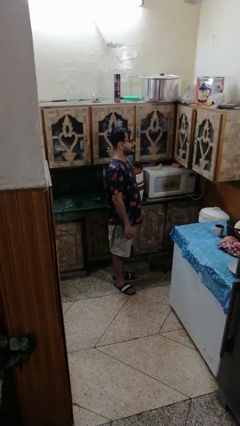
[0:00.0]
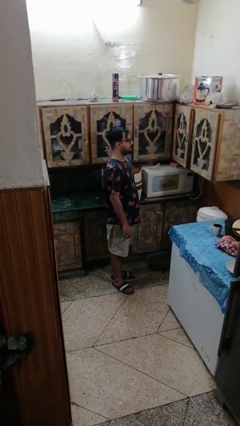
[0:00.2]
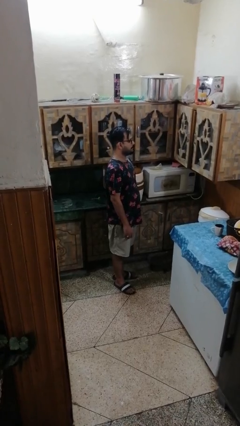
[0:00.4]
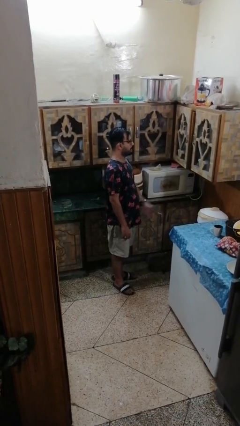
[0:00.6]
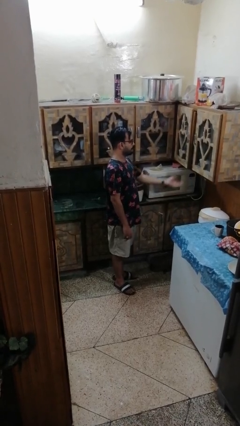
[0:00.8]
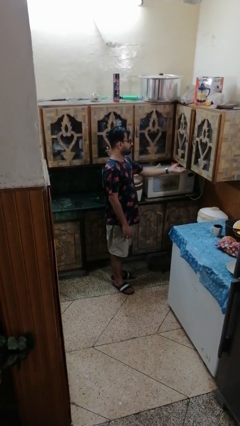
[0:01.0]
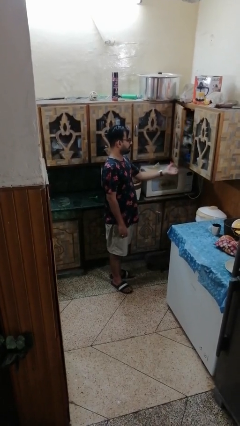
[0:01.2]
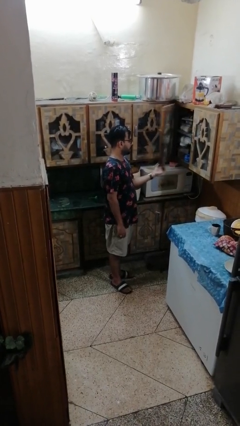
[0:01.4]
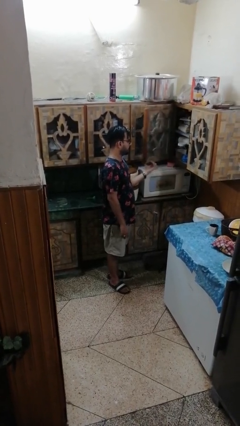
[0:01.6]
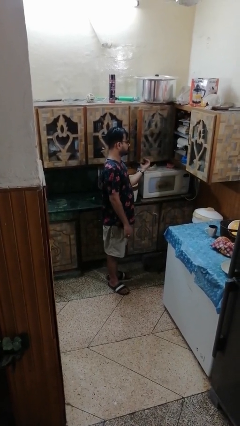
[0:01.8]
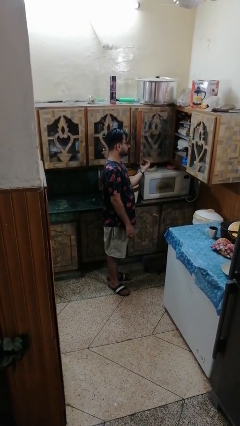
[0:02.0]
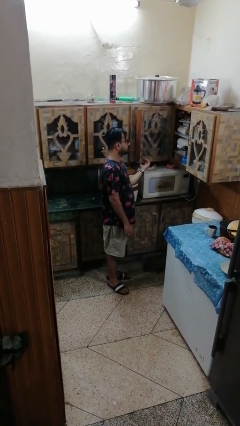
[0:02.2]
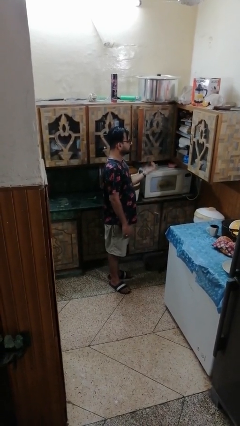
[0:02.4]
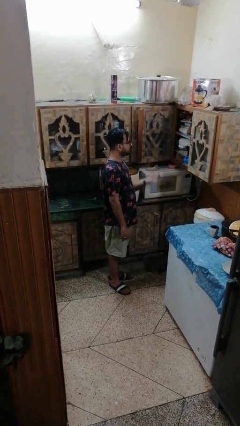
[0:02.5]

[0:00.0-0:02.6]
person opens cabinet

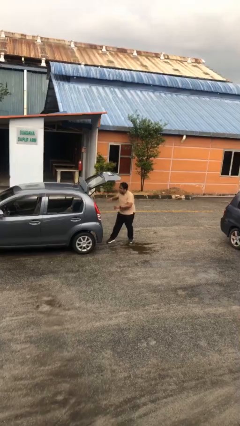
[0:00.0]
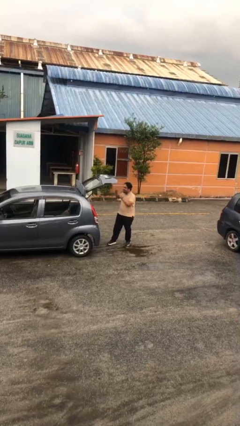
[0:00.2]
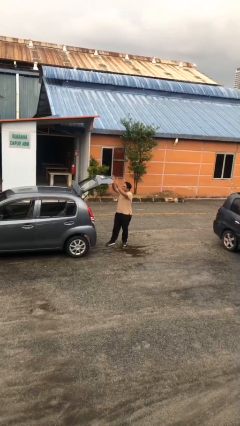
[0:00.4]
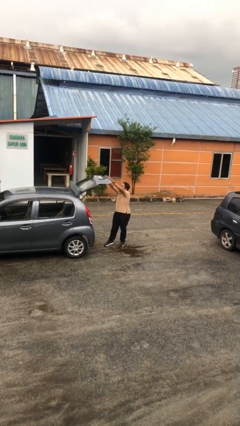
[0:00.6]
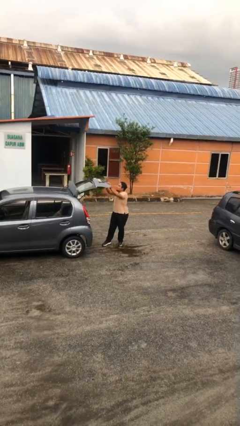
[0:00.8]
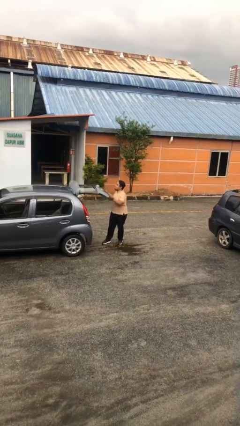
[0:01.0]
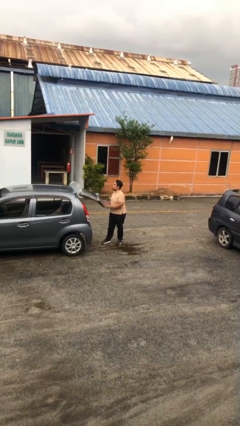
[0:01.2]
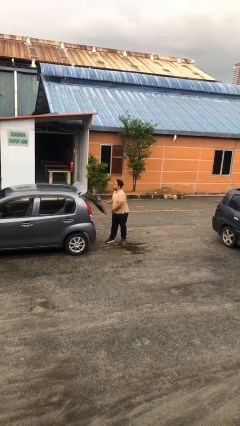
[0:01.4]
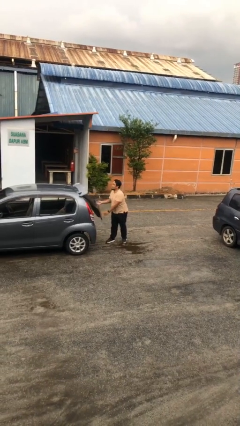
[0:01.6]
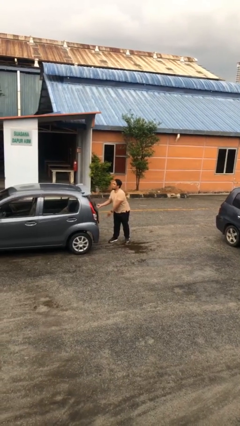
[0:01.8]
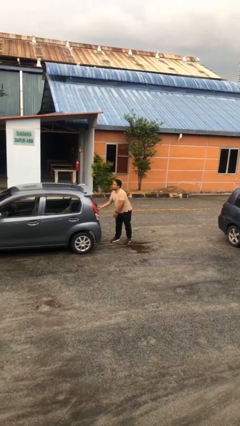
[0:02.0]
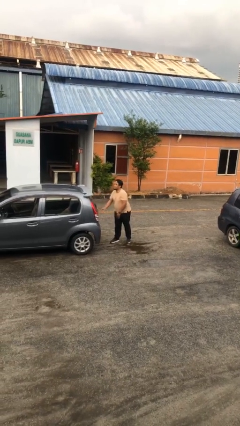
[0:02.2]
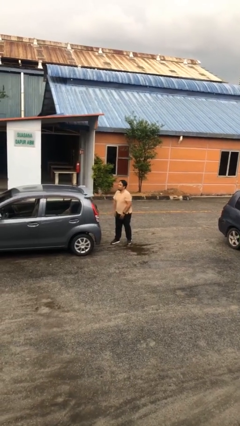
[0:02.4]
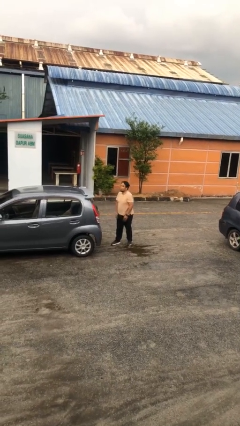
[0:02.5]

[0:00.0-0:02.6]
person closes car trunk

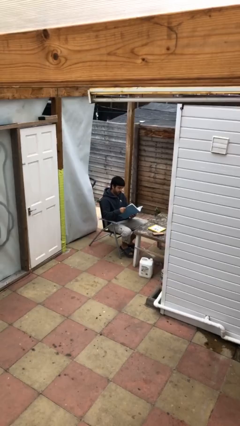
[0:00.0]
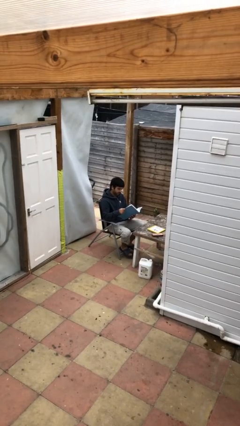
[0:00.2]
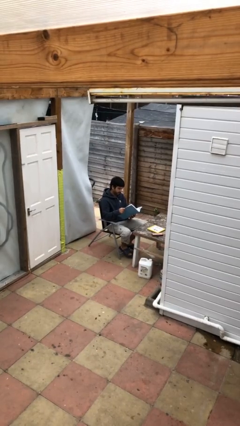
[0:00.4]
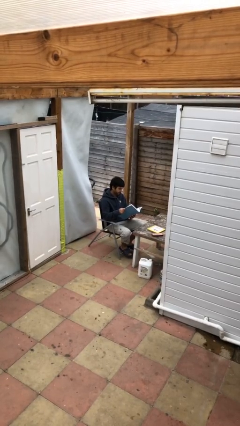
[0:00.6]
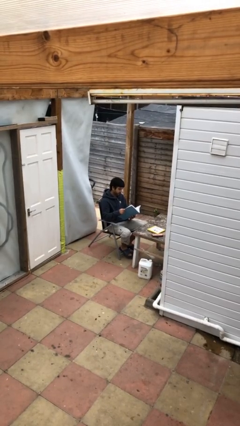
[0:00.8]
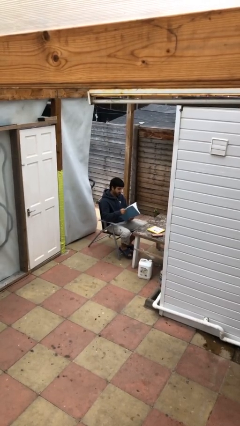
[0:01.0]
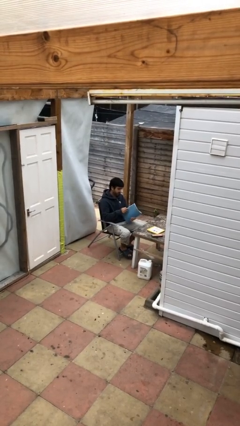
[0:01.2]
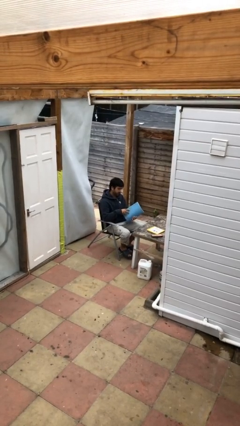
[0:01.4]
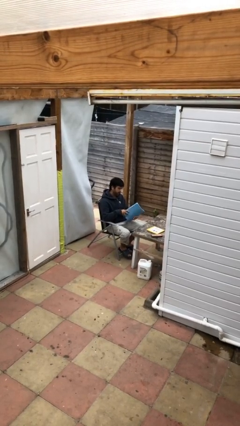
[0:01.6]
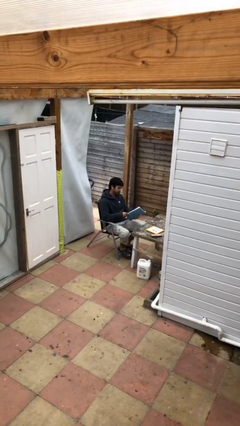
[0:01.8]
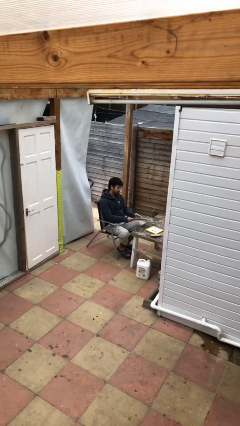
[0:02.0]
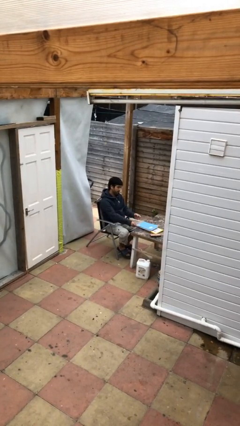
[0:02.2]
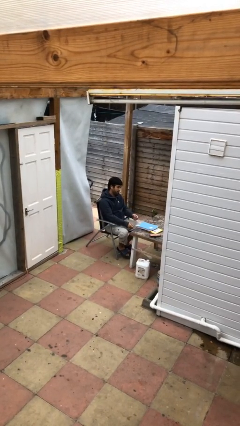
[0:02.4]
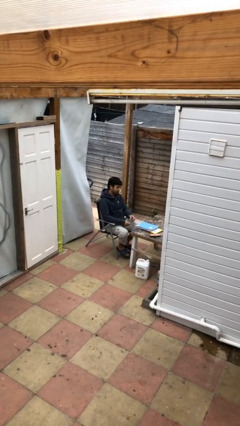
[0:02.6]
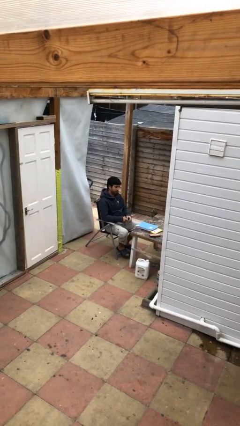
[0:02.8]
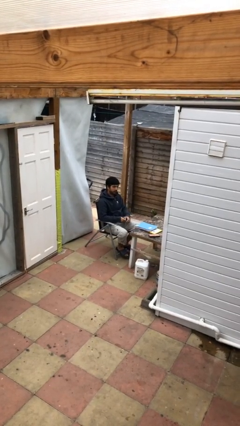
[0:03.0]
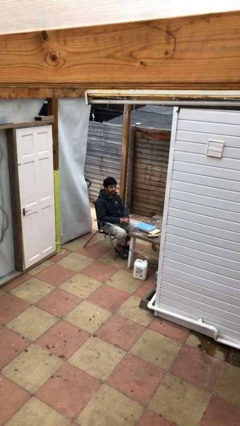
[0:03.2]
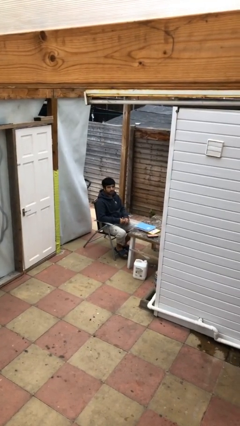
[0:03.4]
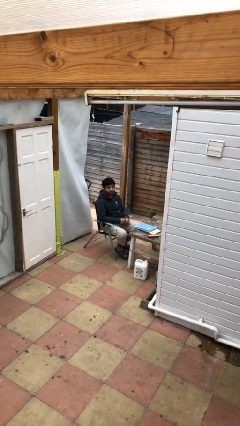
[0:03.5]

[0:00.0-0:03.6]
person puts down object on table

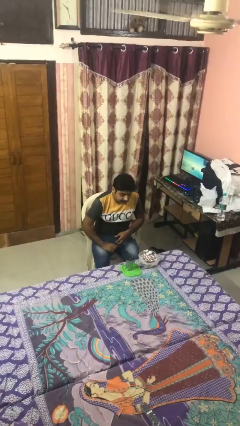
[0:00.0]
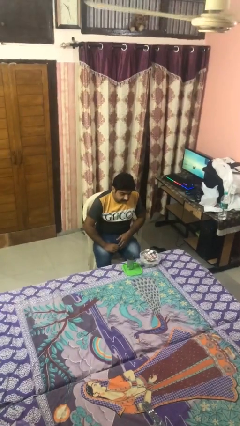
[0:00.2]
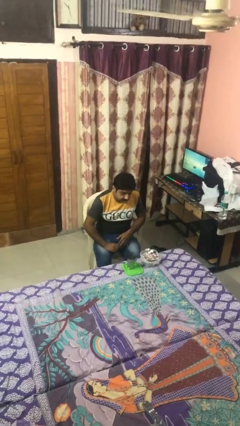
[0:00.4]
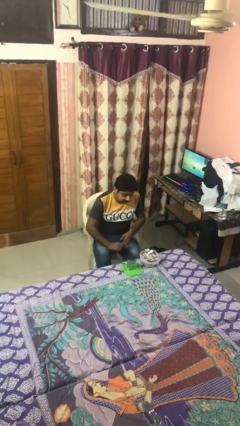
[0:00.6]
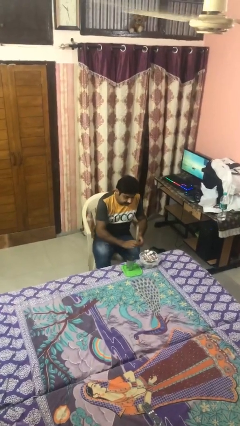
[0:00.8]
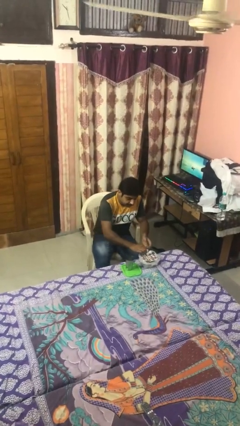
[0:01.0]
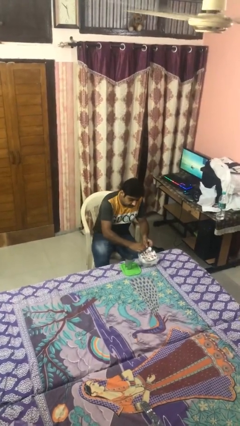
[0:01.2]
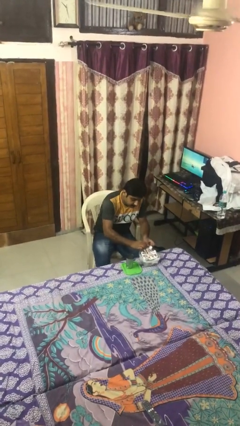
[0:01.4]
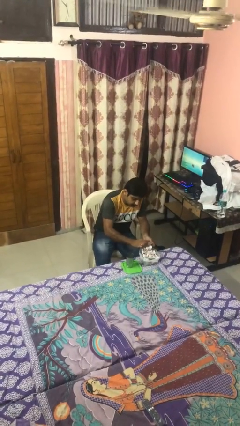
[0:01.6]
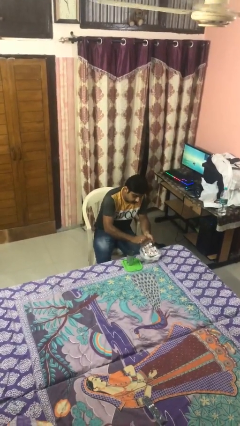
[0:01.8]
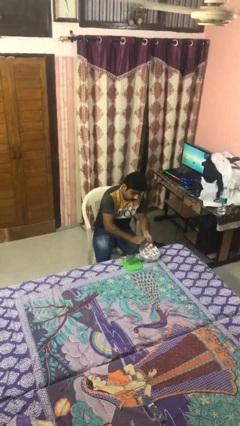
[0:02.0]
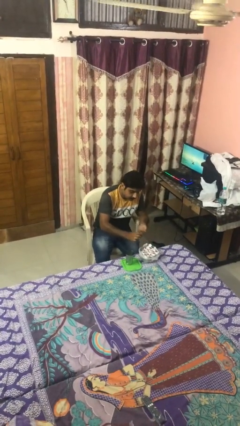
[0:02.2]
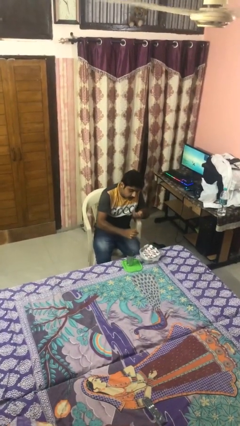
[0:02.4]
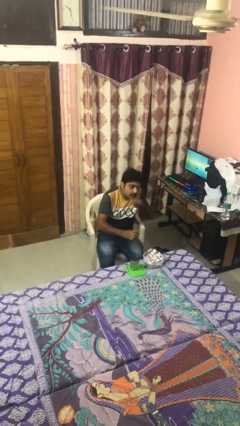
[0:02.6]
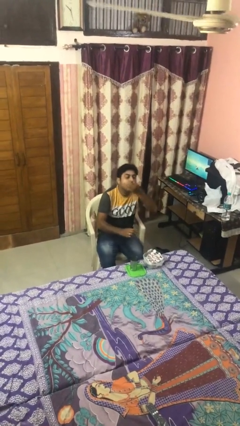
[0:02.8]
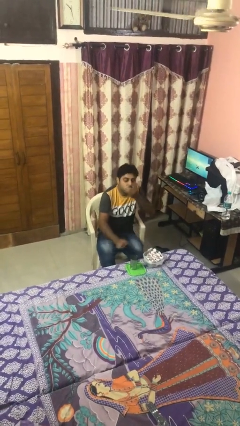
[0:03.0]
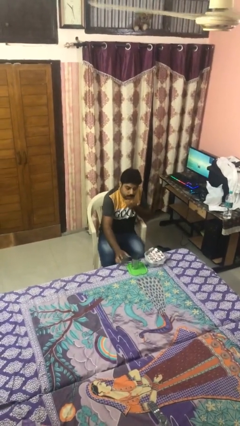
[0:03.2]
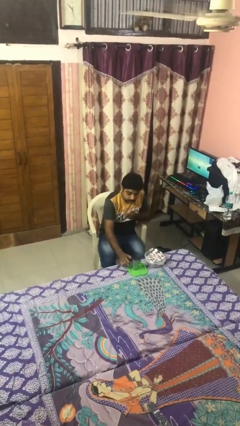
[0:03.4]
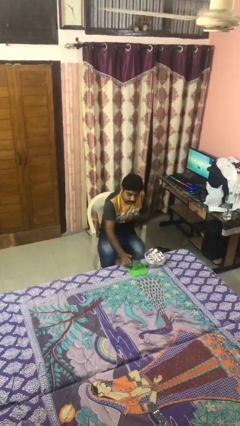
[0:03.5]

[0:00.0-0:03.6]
person takes medicine pills

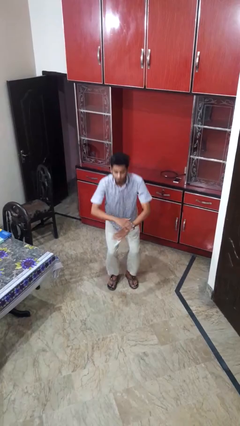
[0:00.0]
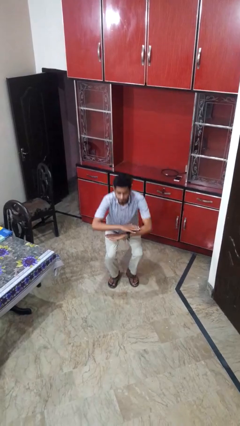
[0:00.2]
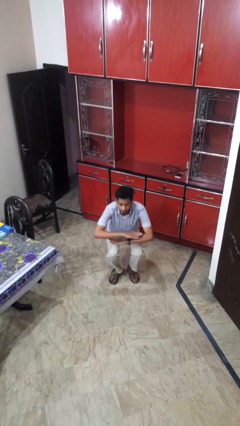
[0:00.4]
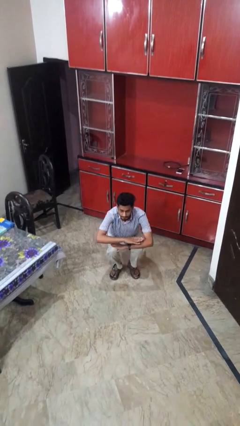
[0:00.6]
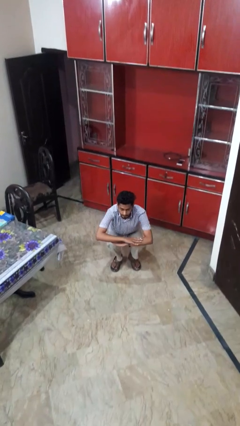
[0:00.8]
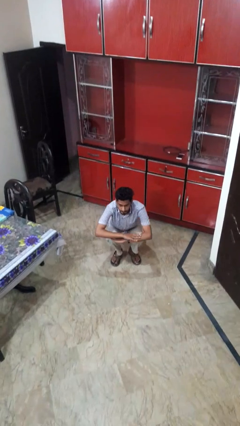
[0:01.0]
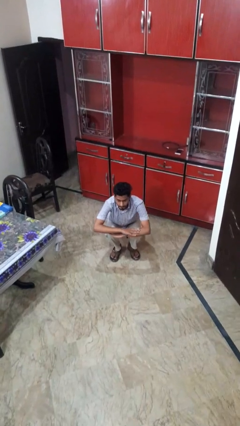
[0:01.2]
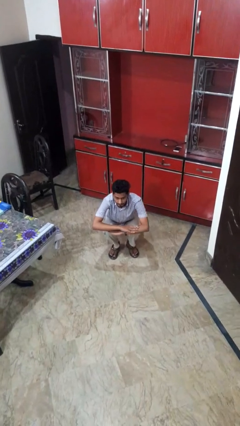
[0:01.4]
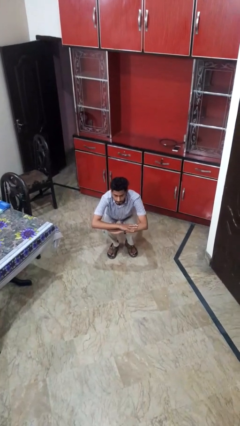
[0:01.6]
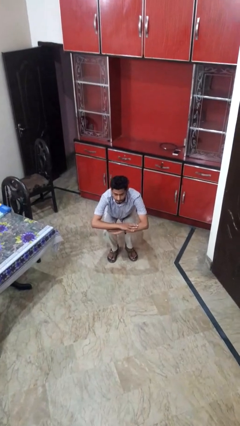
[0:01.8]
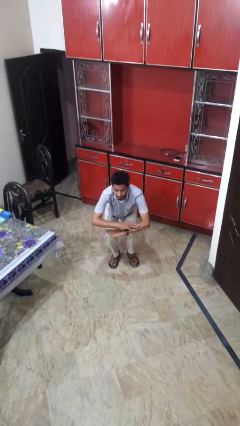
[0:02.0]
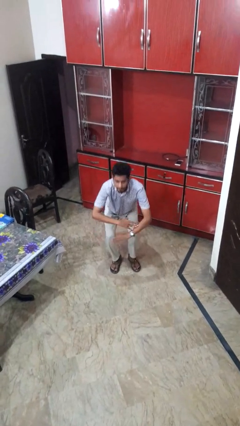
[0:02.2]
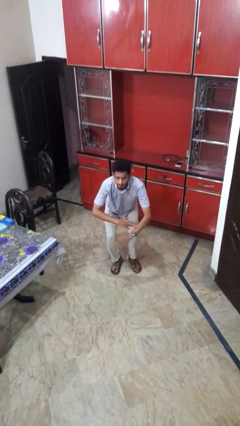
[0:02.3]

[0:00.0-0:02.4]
person squats

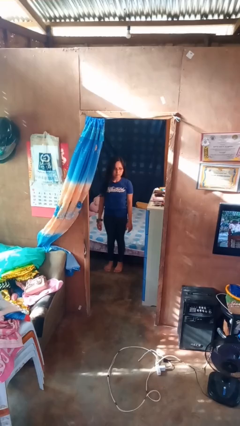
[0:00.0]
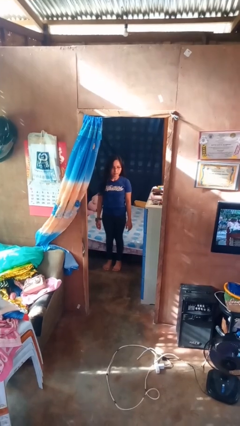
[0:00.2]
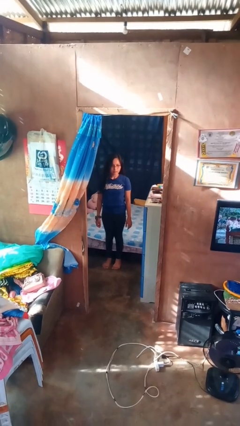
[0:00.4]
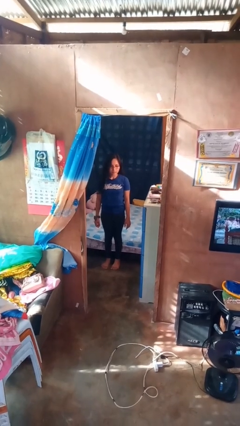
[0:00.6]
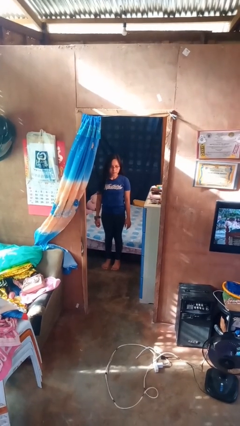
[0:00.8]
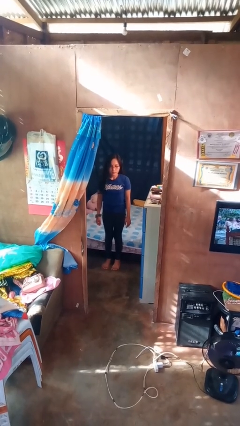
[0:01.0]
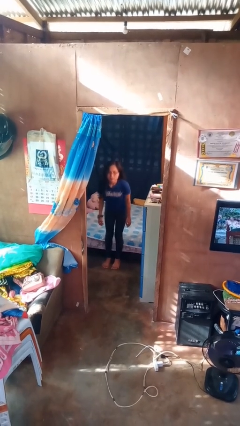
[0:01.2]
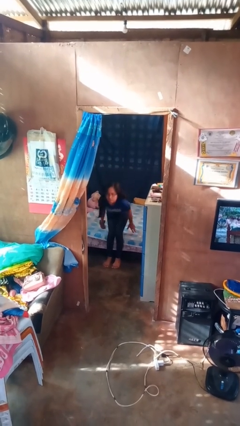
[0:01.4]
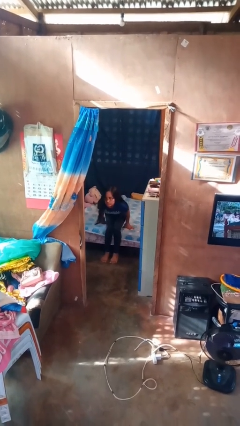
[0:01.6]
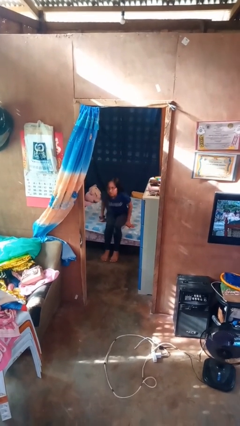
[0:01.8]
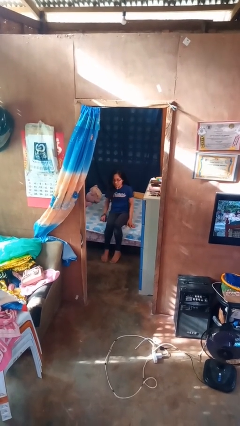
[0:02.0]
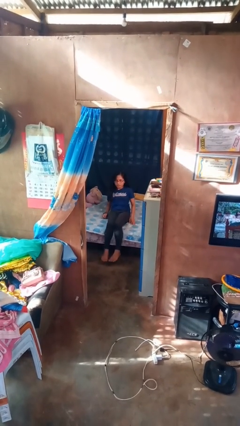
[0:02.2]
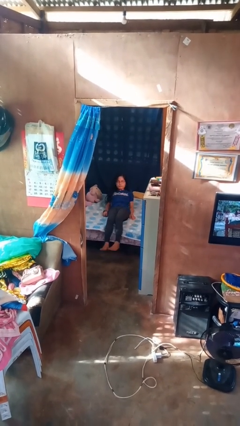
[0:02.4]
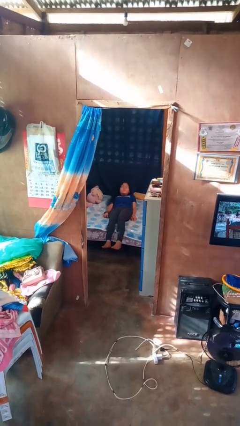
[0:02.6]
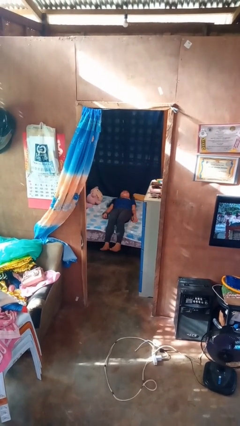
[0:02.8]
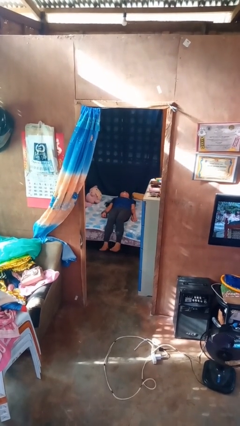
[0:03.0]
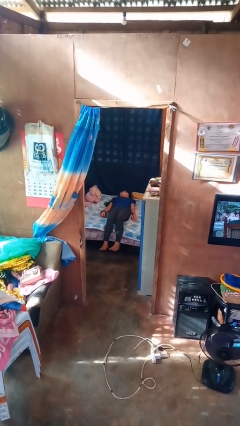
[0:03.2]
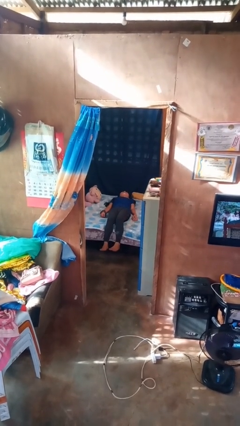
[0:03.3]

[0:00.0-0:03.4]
person lies down on bed
